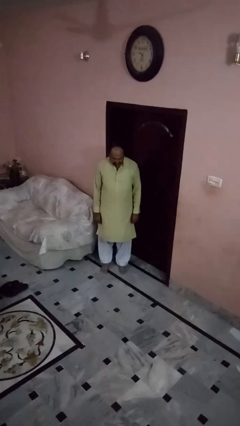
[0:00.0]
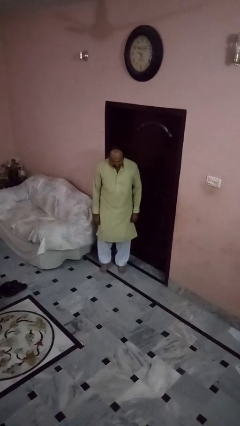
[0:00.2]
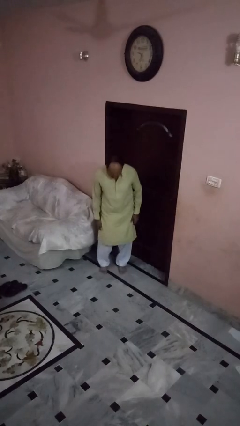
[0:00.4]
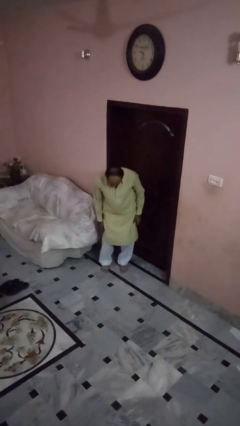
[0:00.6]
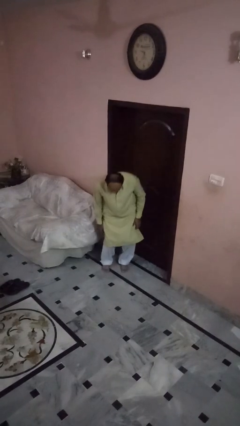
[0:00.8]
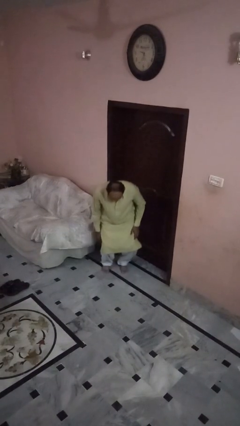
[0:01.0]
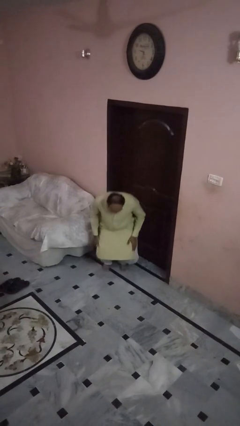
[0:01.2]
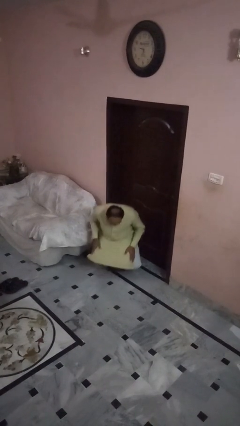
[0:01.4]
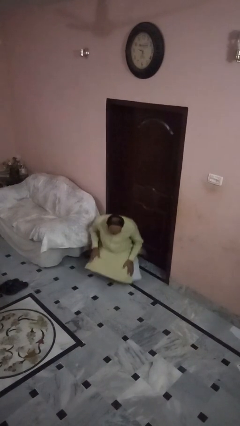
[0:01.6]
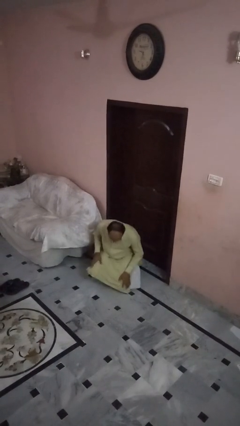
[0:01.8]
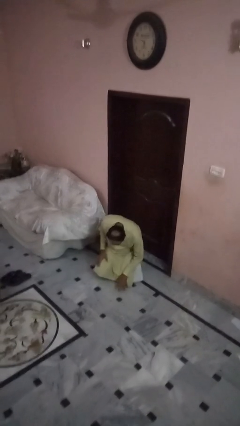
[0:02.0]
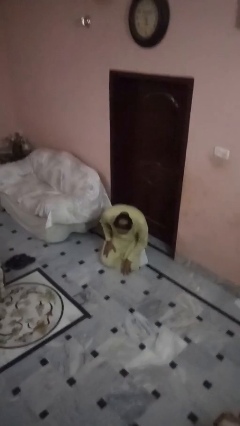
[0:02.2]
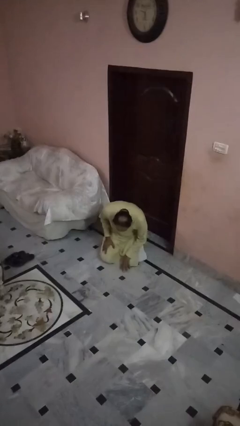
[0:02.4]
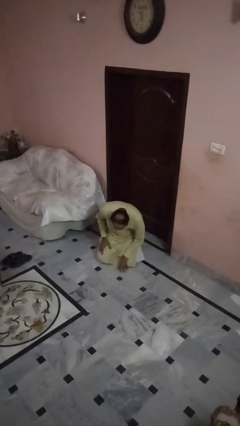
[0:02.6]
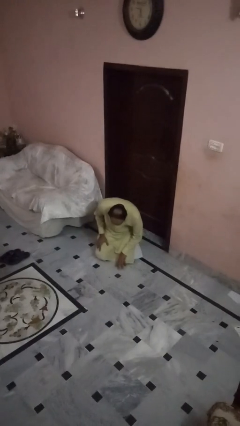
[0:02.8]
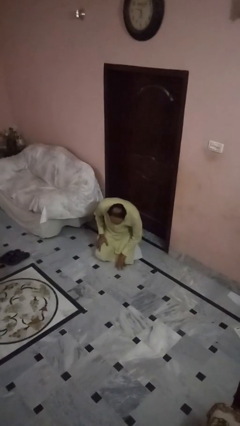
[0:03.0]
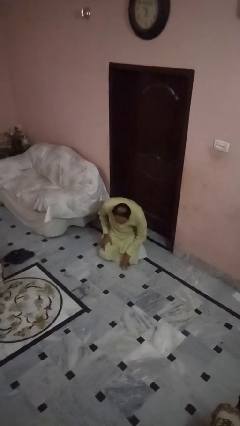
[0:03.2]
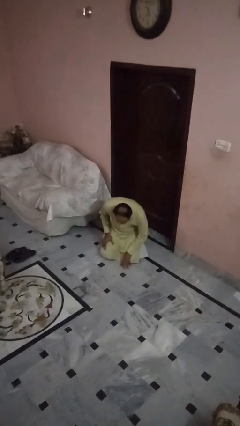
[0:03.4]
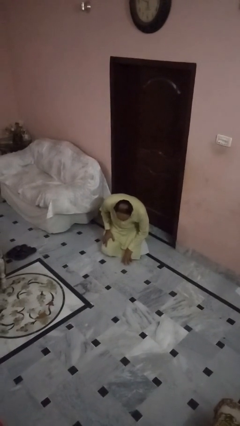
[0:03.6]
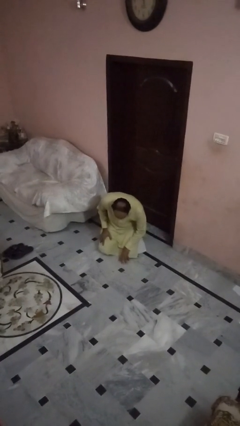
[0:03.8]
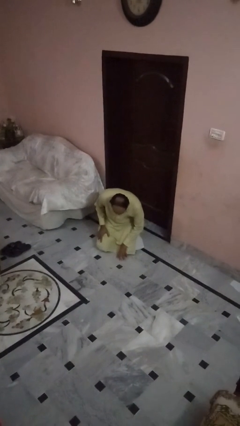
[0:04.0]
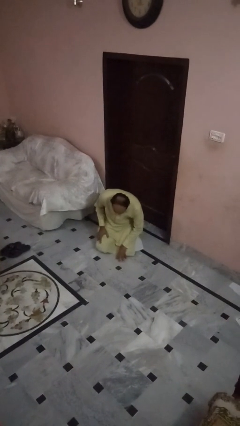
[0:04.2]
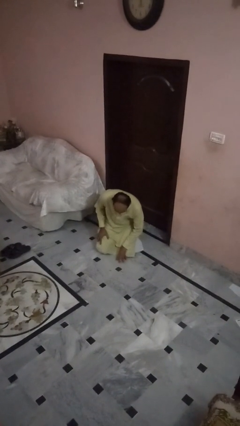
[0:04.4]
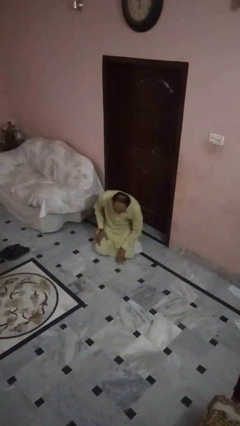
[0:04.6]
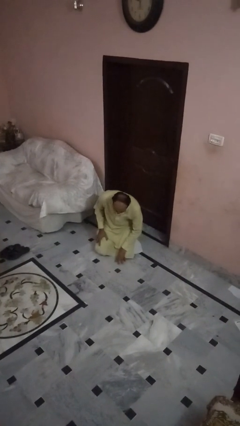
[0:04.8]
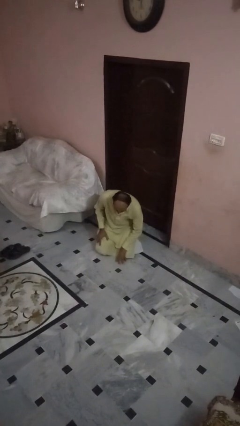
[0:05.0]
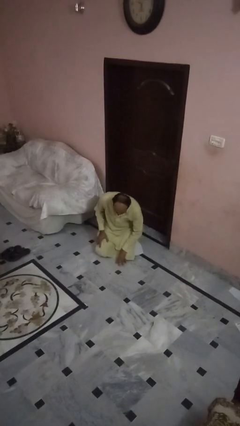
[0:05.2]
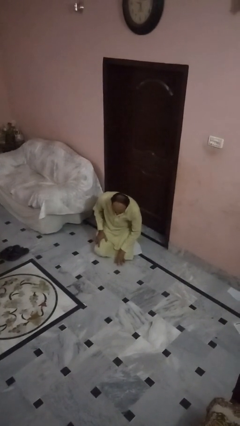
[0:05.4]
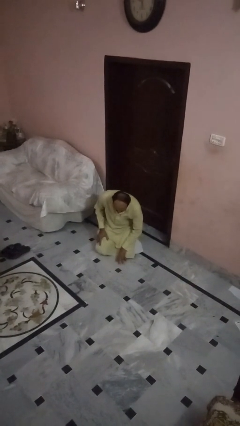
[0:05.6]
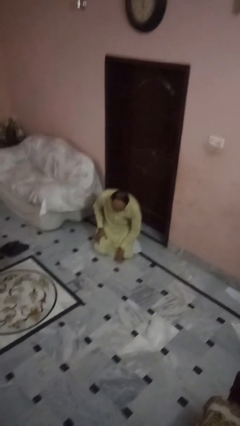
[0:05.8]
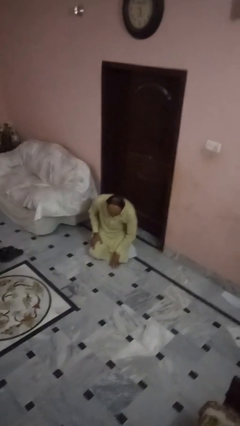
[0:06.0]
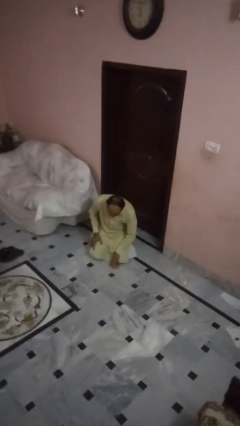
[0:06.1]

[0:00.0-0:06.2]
person falls while standing

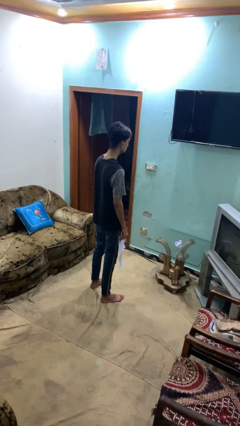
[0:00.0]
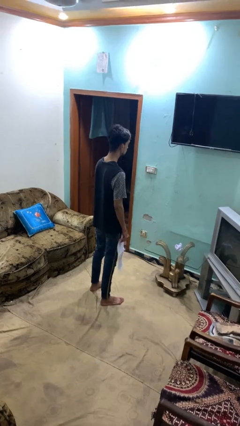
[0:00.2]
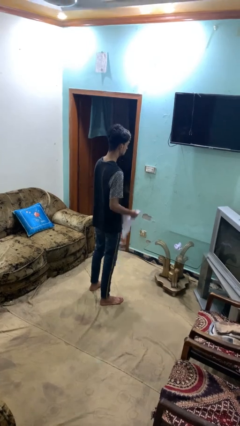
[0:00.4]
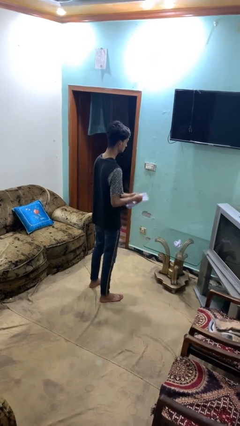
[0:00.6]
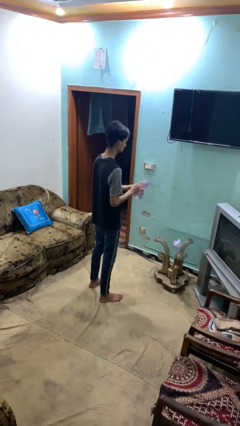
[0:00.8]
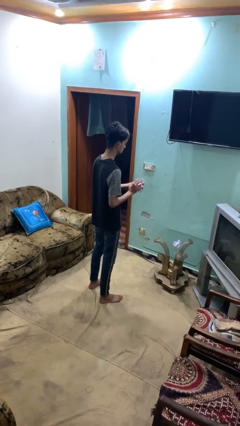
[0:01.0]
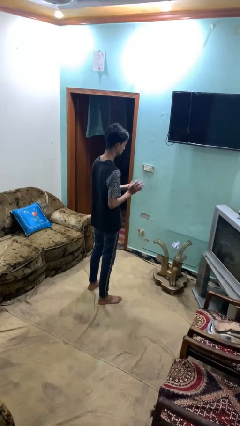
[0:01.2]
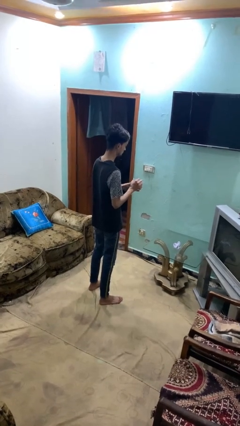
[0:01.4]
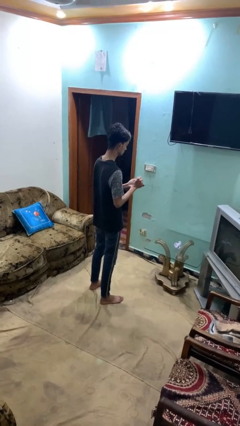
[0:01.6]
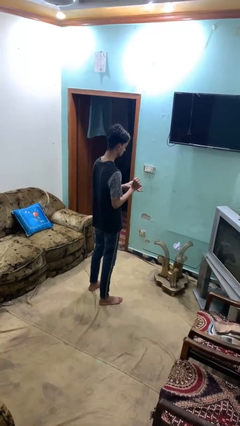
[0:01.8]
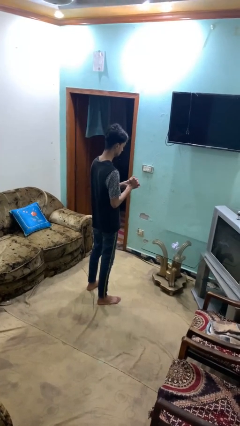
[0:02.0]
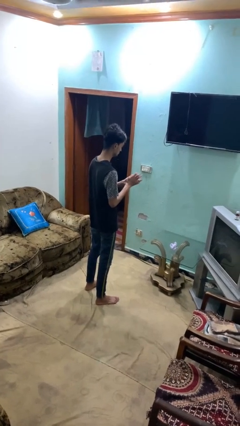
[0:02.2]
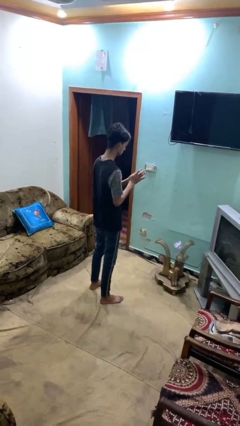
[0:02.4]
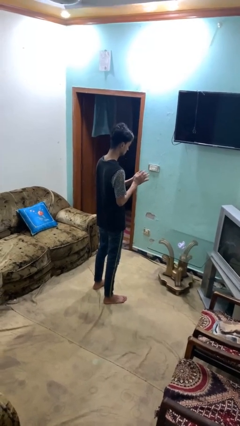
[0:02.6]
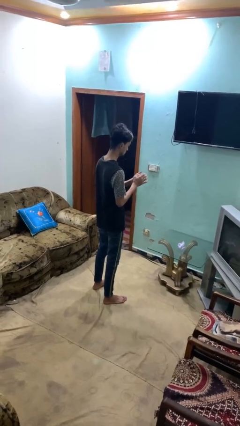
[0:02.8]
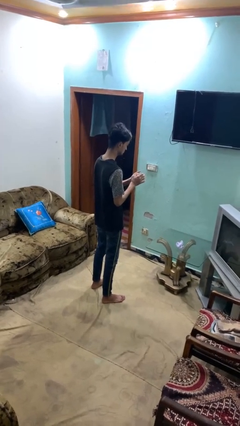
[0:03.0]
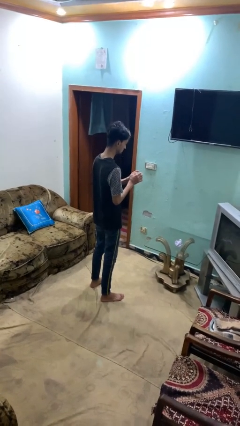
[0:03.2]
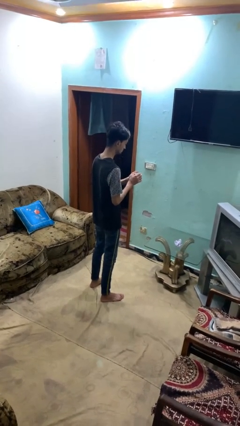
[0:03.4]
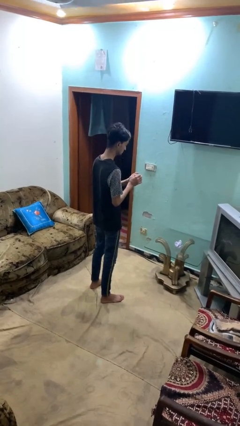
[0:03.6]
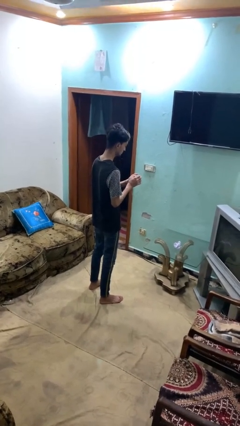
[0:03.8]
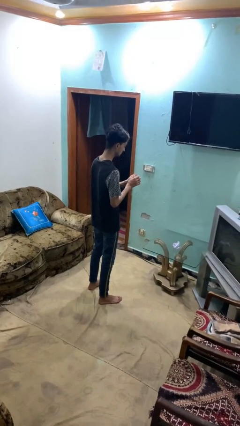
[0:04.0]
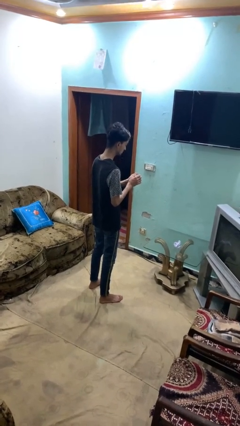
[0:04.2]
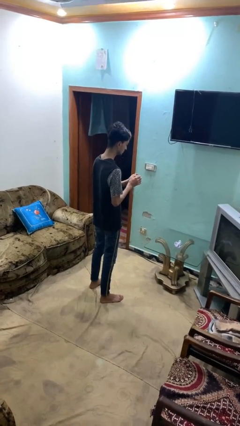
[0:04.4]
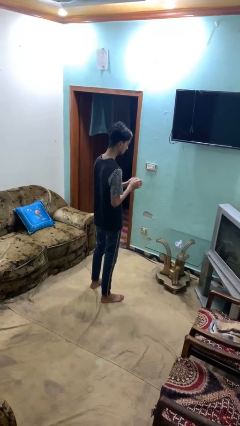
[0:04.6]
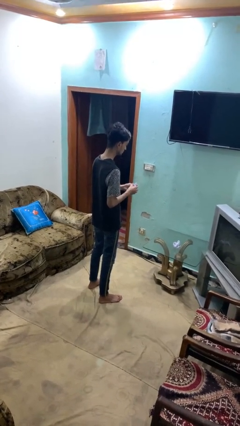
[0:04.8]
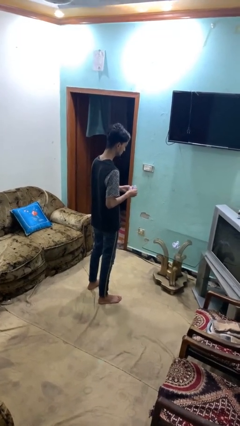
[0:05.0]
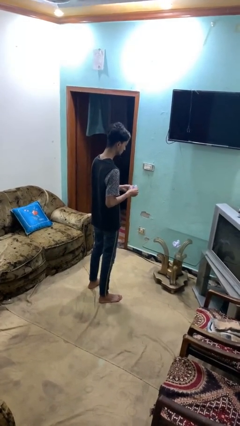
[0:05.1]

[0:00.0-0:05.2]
person crumples paper

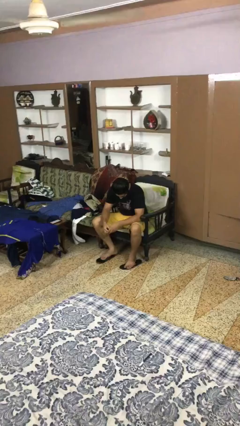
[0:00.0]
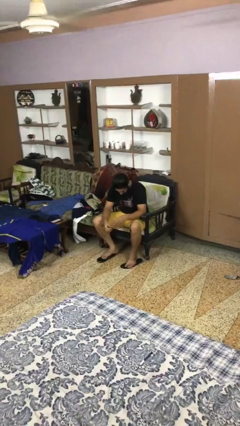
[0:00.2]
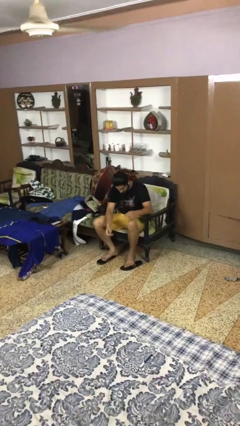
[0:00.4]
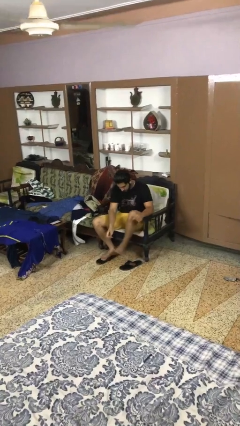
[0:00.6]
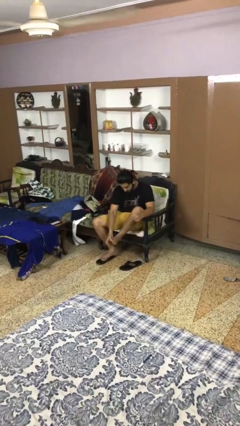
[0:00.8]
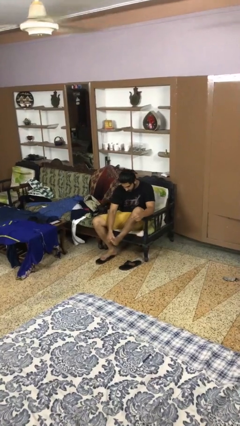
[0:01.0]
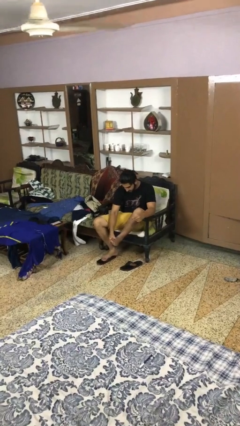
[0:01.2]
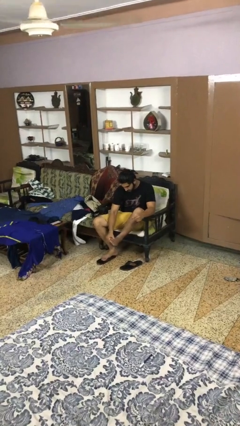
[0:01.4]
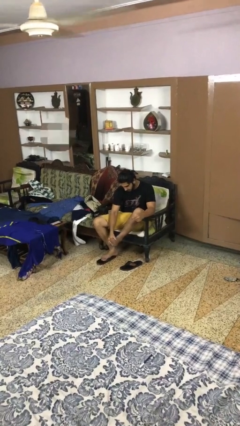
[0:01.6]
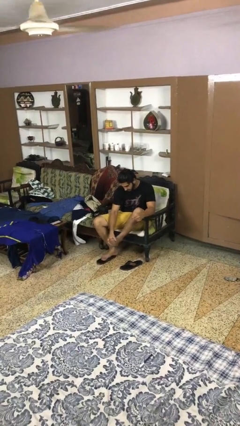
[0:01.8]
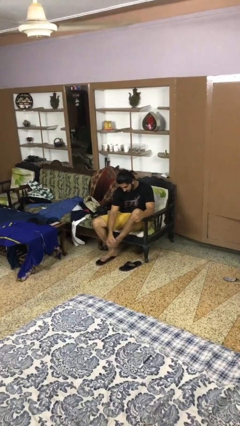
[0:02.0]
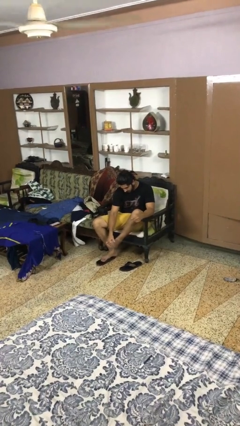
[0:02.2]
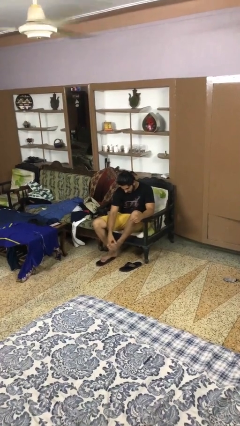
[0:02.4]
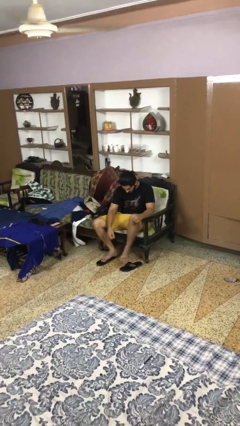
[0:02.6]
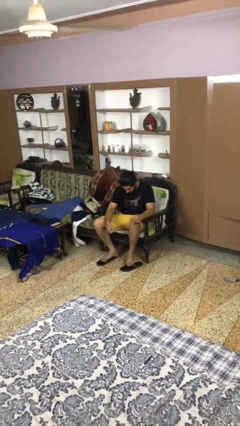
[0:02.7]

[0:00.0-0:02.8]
person rubs foot

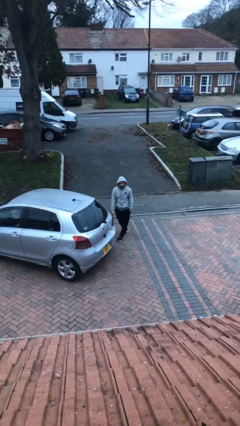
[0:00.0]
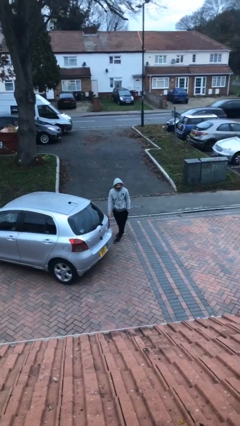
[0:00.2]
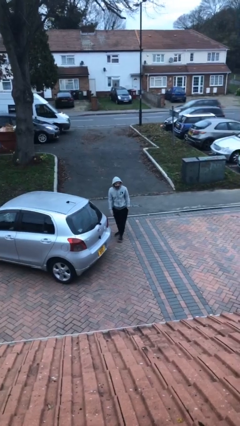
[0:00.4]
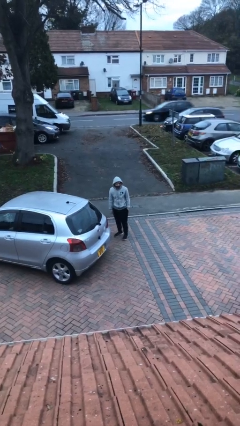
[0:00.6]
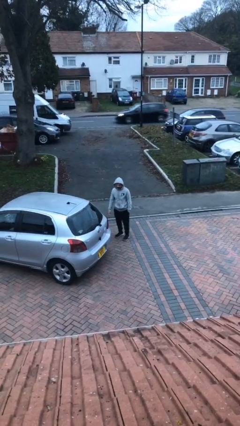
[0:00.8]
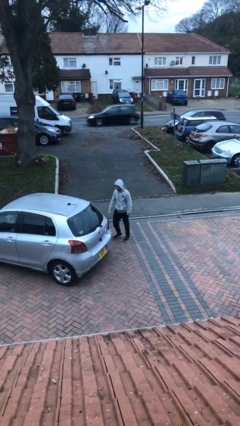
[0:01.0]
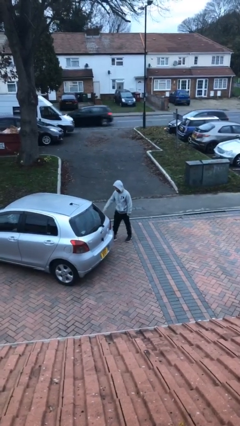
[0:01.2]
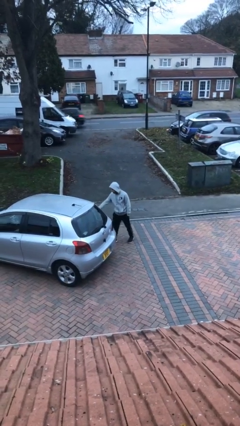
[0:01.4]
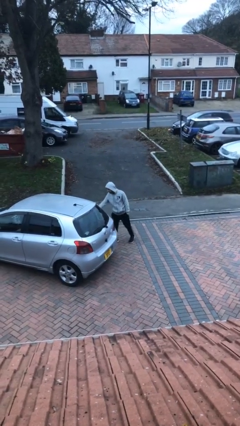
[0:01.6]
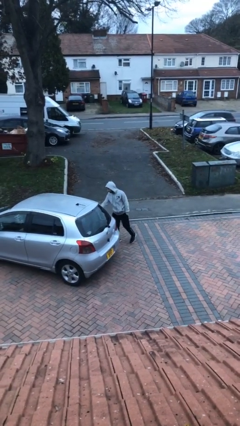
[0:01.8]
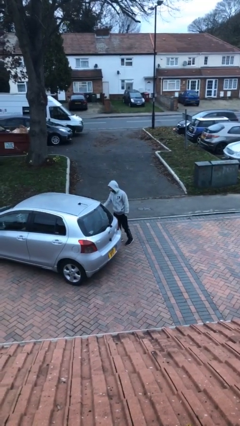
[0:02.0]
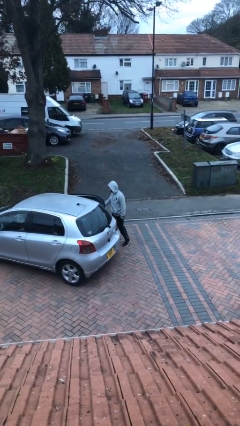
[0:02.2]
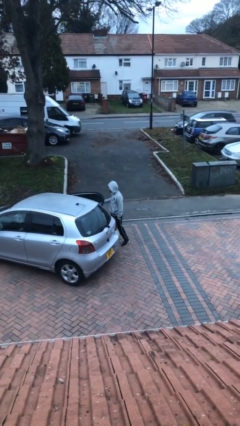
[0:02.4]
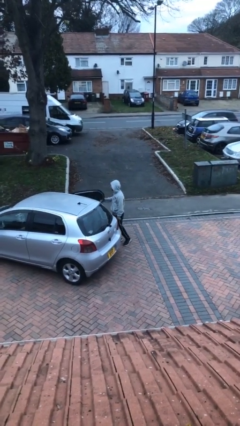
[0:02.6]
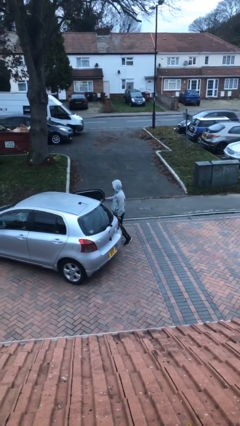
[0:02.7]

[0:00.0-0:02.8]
person opens car door

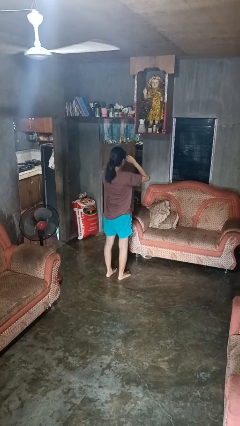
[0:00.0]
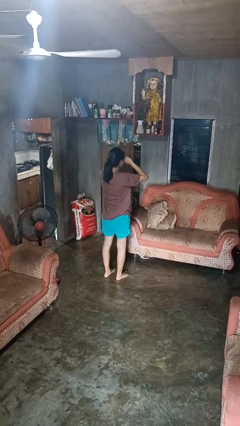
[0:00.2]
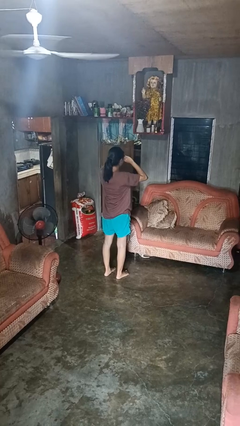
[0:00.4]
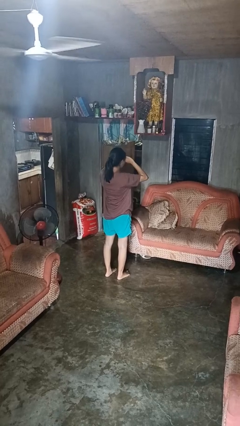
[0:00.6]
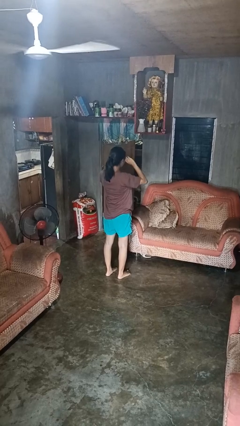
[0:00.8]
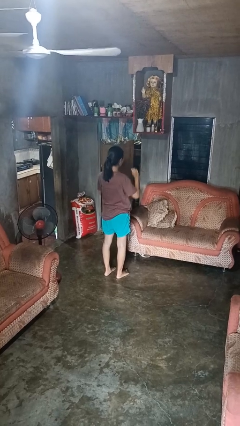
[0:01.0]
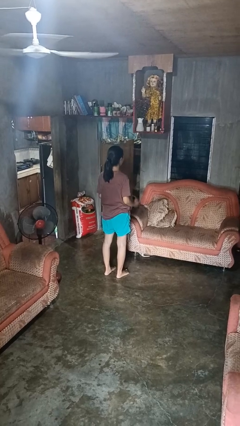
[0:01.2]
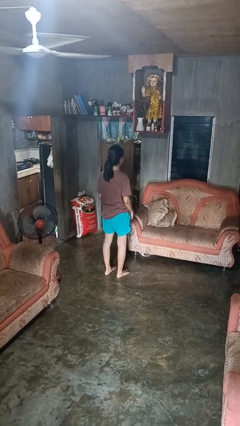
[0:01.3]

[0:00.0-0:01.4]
person rubs eyes
